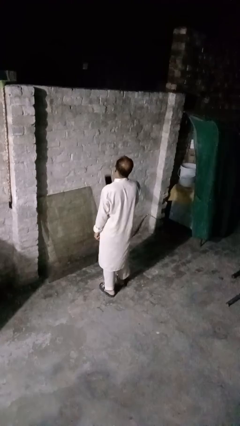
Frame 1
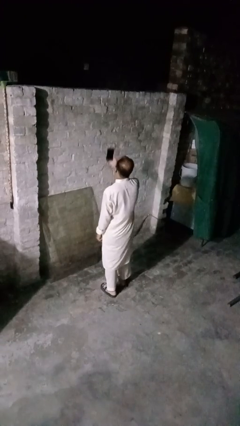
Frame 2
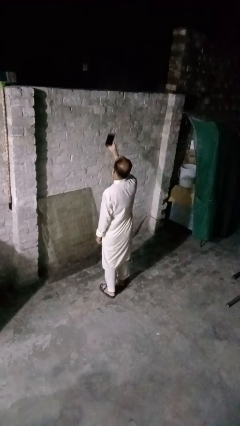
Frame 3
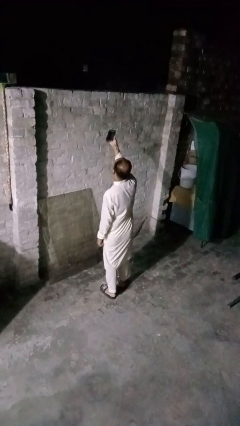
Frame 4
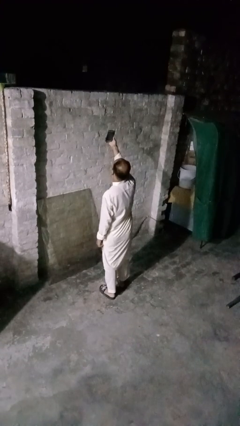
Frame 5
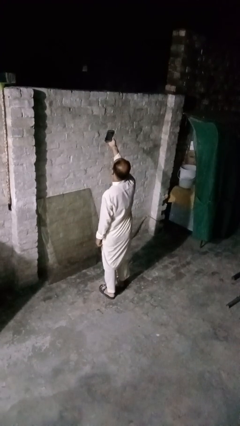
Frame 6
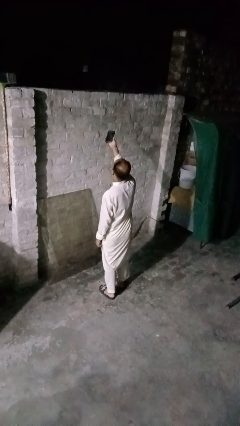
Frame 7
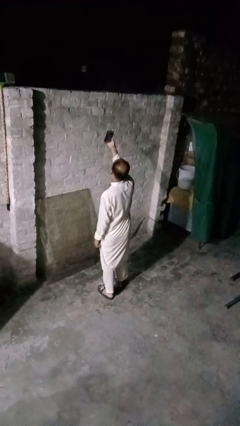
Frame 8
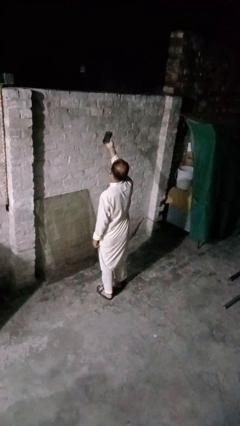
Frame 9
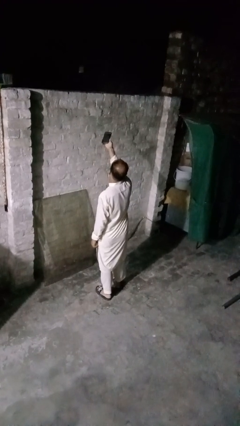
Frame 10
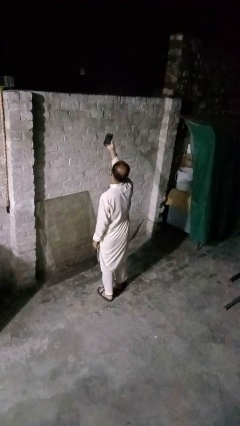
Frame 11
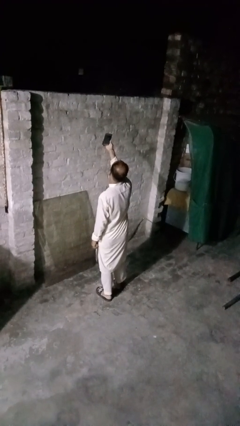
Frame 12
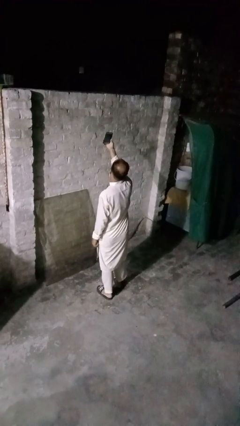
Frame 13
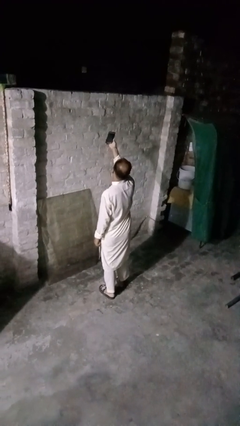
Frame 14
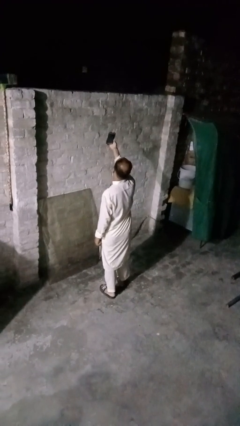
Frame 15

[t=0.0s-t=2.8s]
person takes selfie

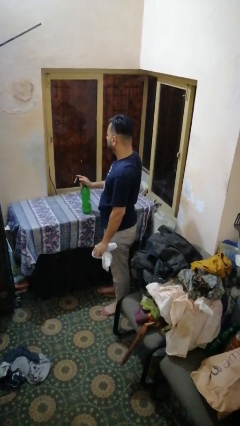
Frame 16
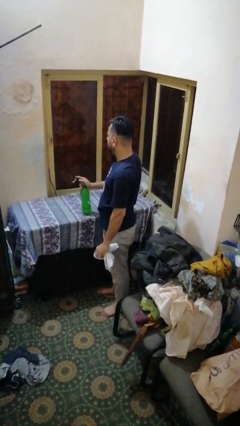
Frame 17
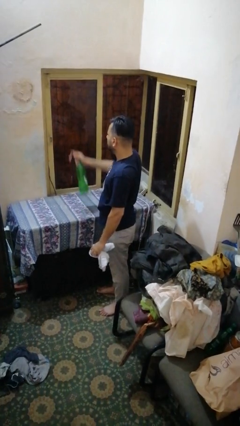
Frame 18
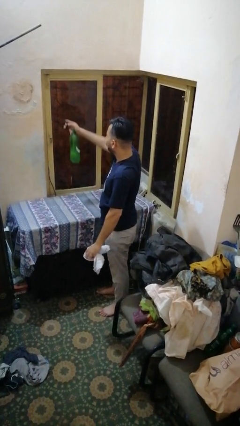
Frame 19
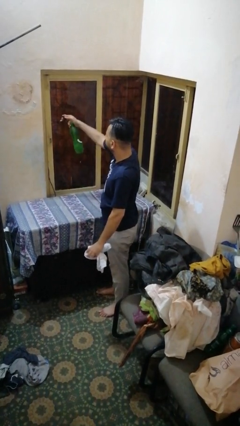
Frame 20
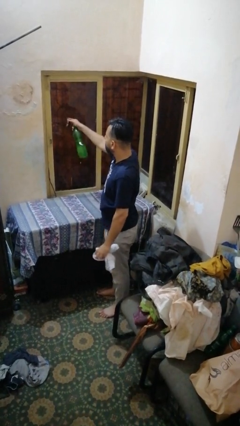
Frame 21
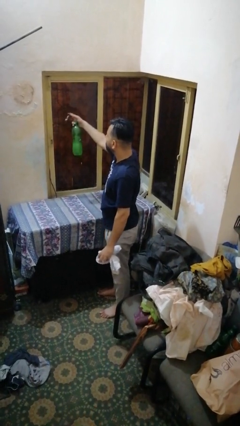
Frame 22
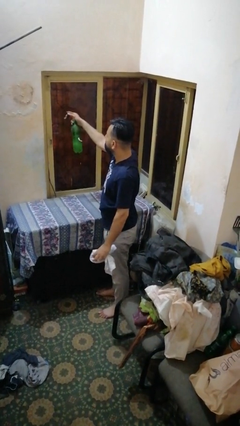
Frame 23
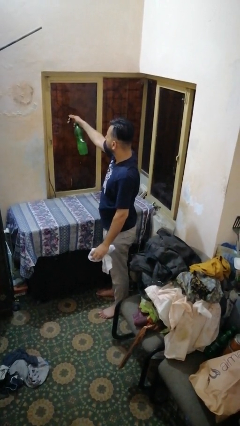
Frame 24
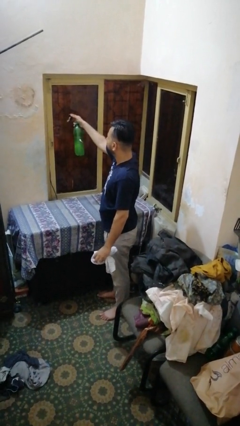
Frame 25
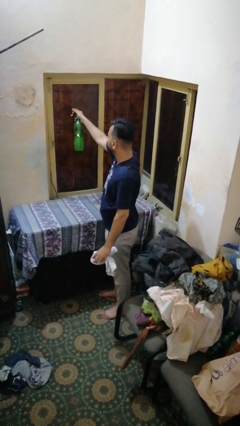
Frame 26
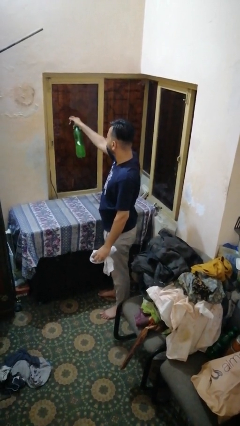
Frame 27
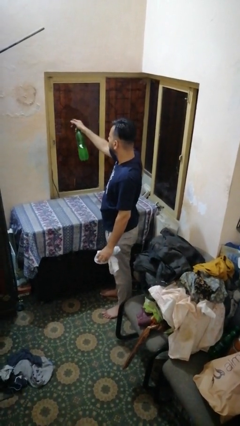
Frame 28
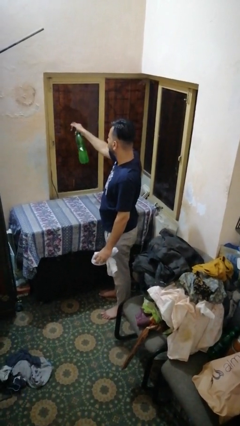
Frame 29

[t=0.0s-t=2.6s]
person sprays from bottle

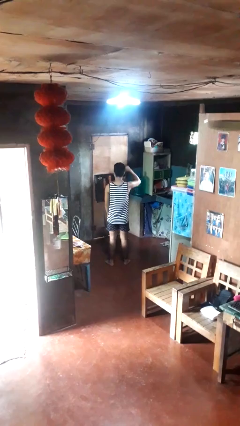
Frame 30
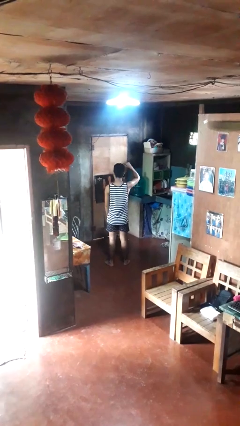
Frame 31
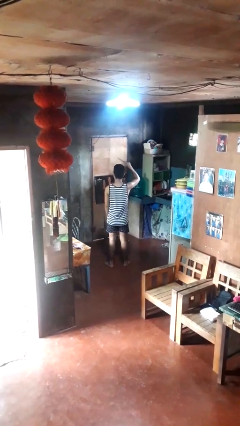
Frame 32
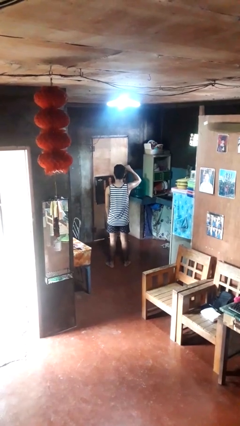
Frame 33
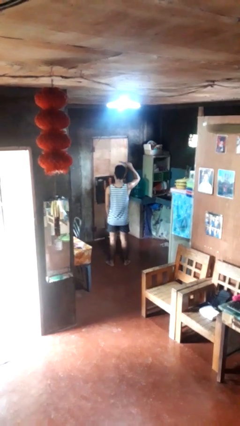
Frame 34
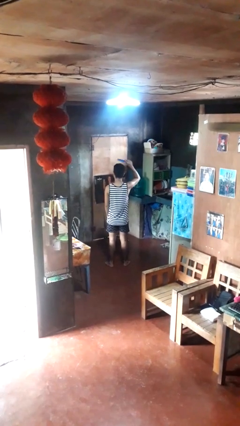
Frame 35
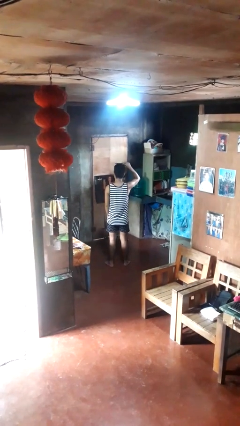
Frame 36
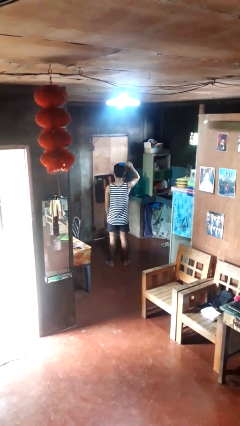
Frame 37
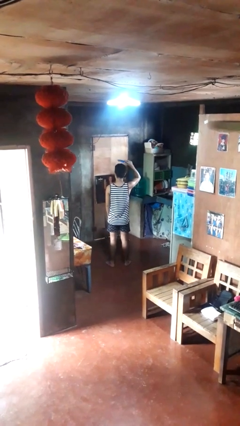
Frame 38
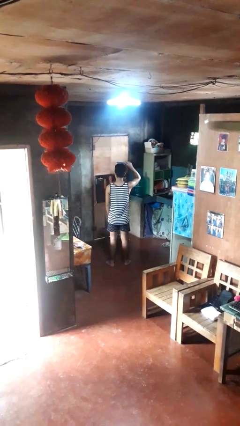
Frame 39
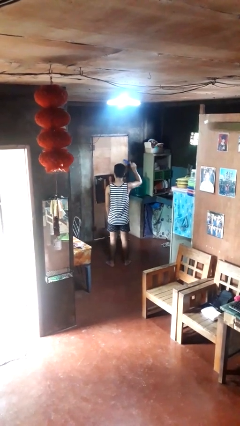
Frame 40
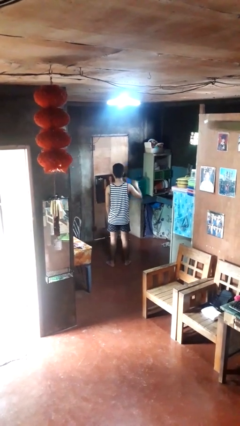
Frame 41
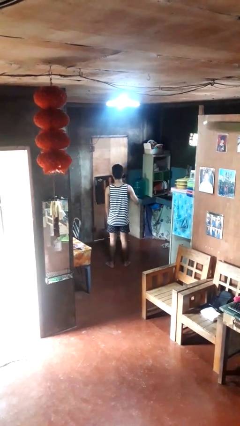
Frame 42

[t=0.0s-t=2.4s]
person brushes hair

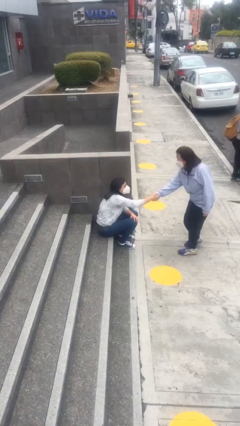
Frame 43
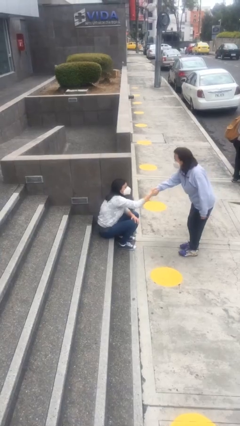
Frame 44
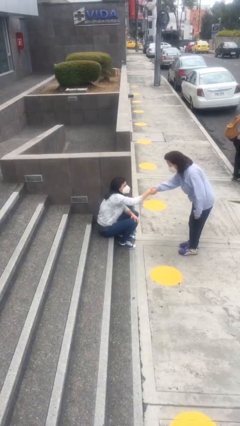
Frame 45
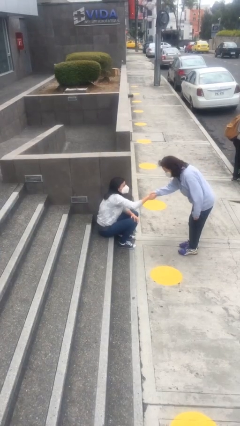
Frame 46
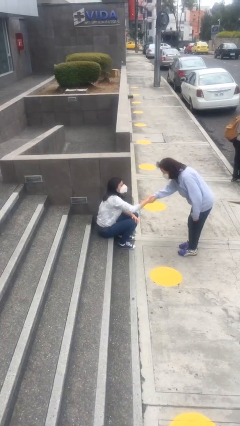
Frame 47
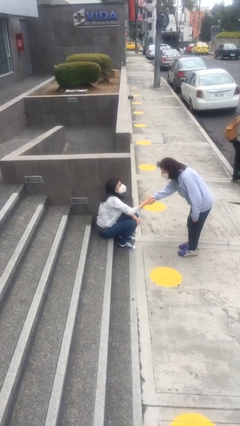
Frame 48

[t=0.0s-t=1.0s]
person shakes hand

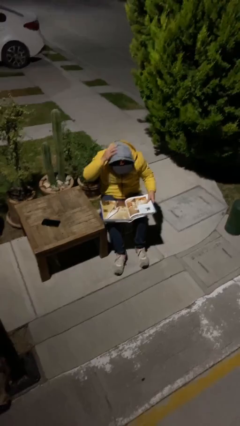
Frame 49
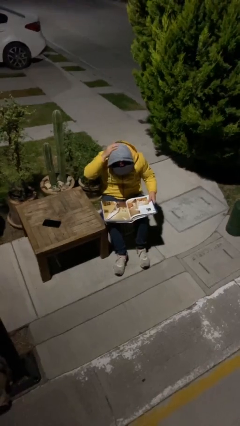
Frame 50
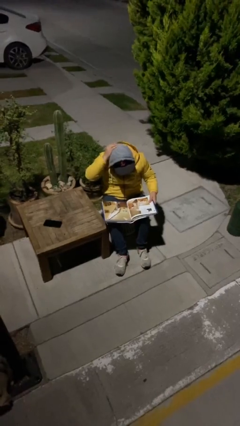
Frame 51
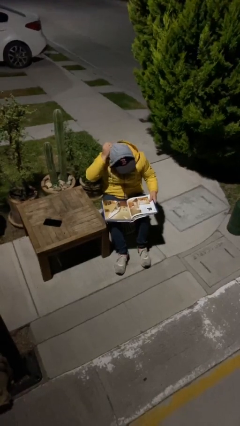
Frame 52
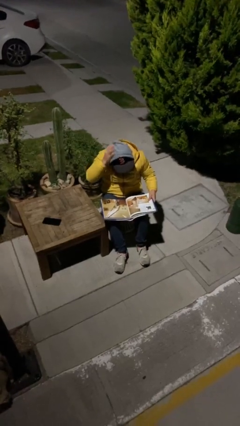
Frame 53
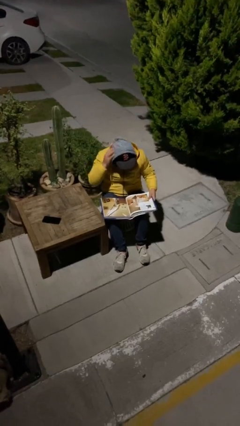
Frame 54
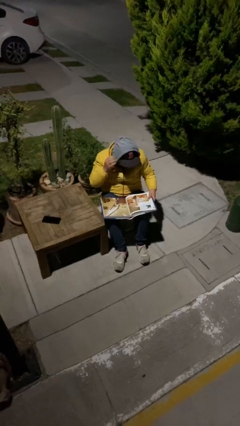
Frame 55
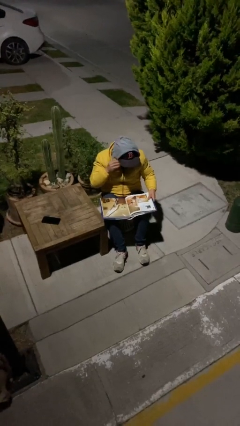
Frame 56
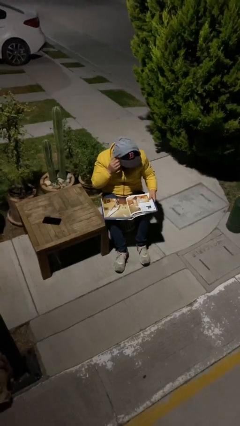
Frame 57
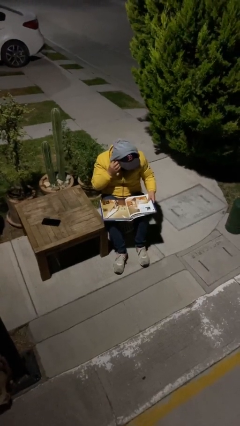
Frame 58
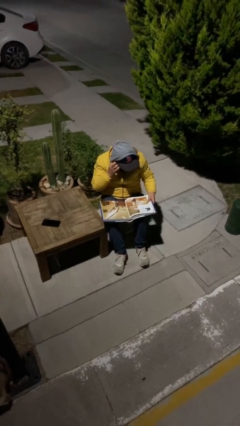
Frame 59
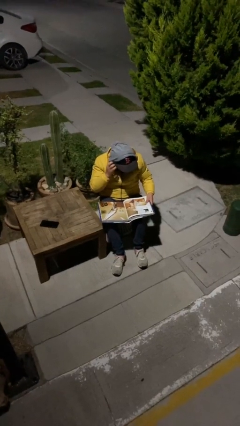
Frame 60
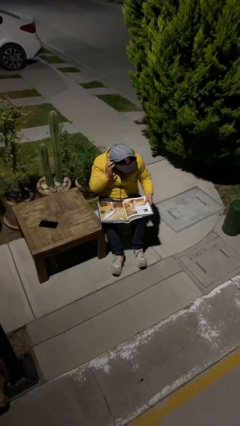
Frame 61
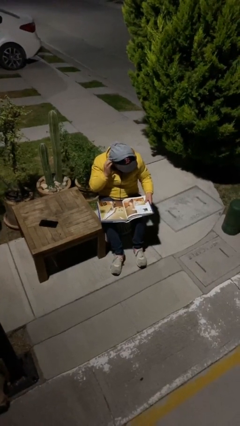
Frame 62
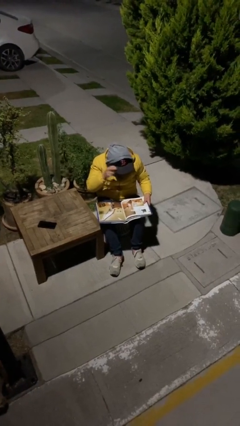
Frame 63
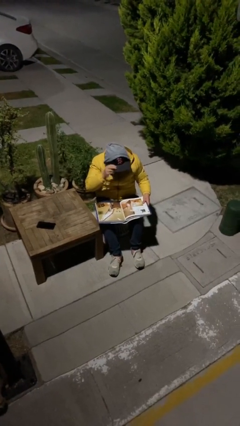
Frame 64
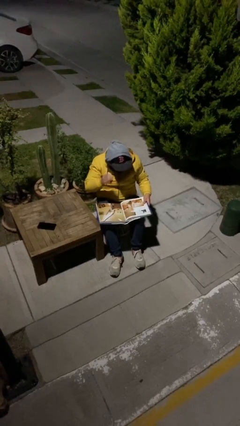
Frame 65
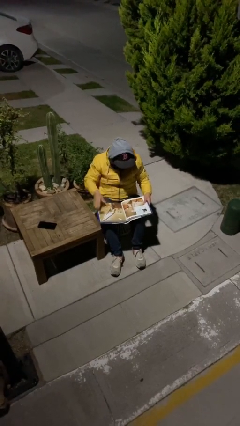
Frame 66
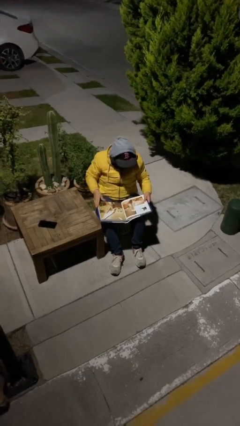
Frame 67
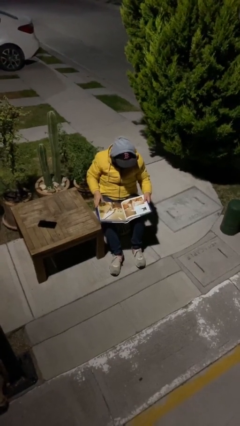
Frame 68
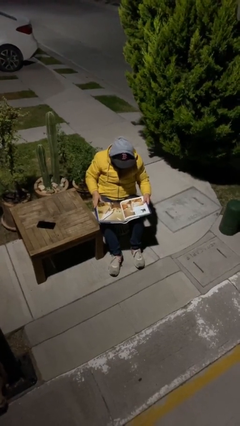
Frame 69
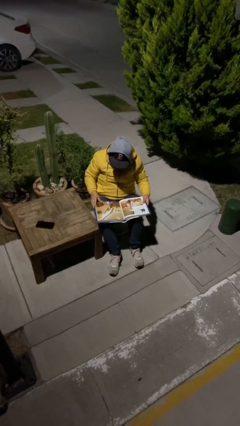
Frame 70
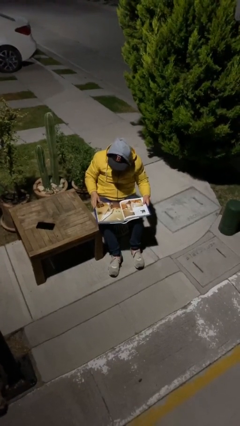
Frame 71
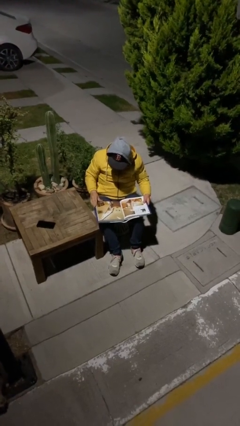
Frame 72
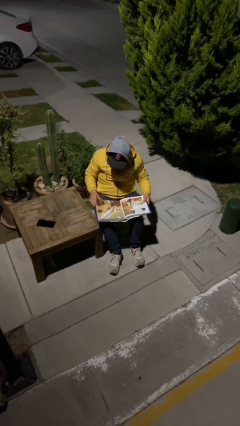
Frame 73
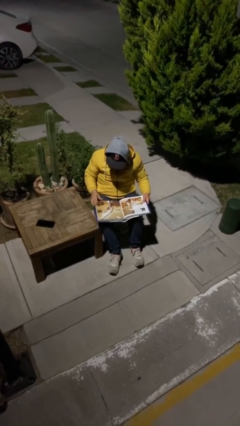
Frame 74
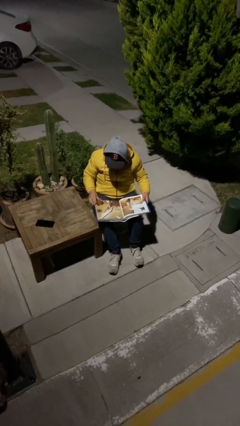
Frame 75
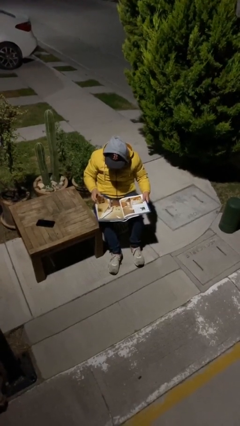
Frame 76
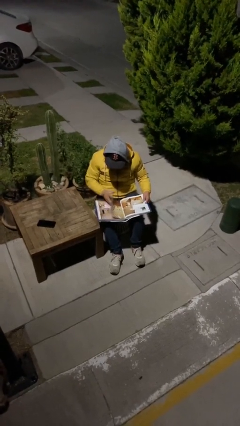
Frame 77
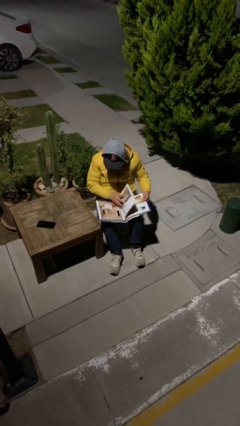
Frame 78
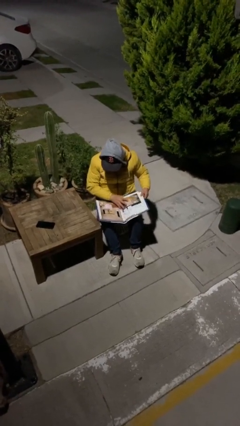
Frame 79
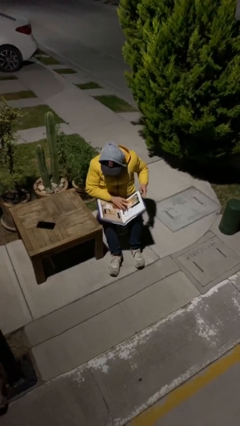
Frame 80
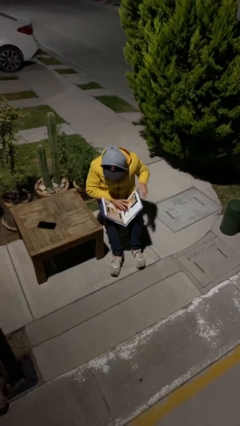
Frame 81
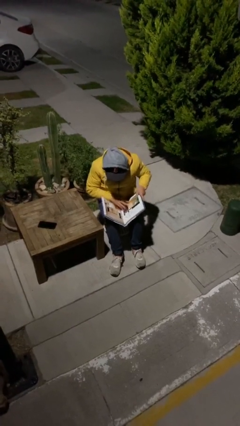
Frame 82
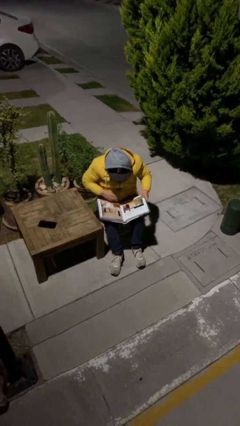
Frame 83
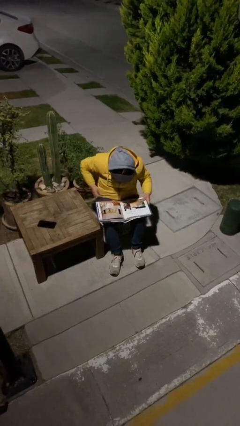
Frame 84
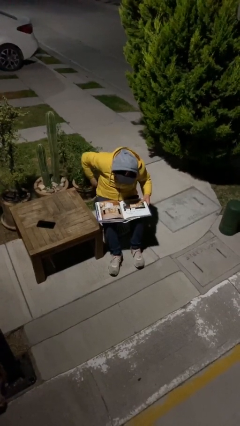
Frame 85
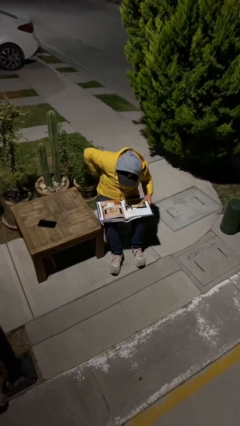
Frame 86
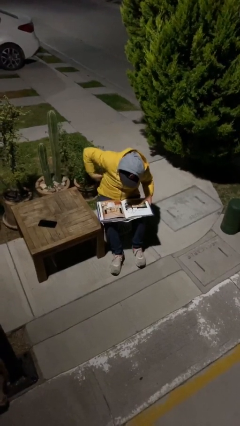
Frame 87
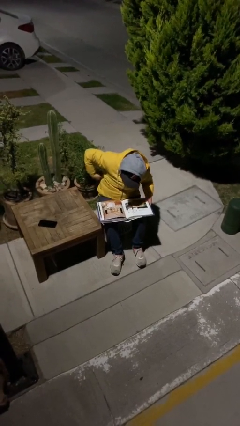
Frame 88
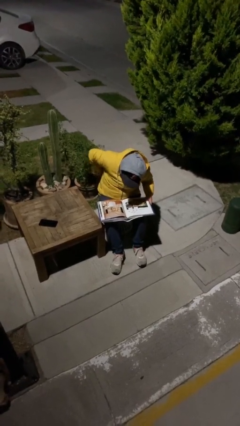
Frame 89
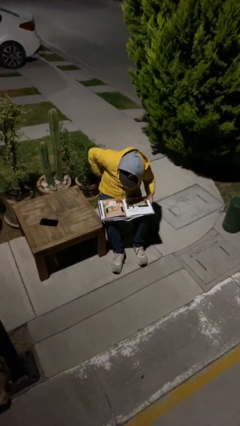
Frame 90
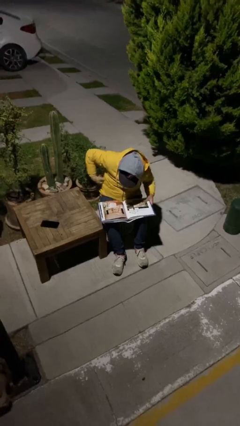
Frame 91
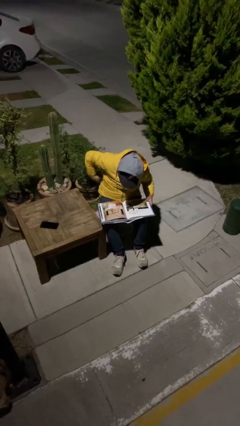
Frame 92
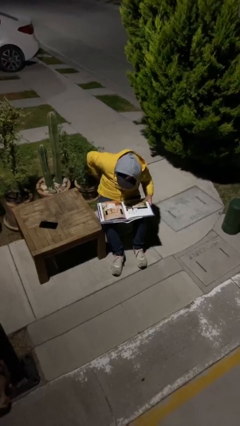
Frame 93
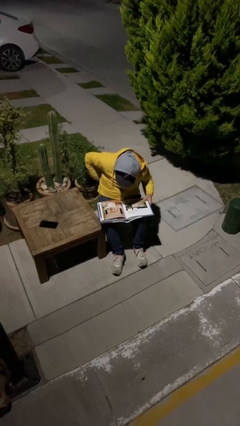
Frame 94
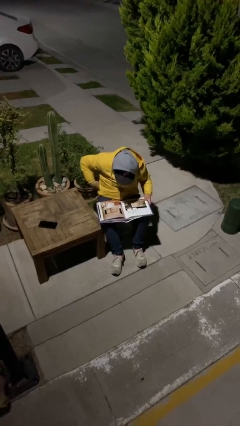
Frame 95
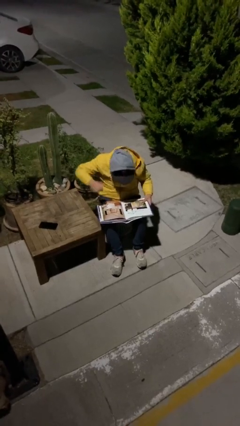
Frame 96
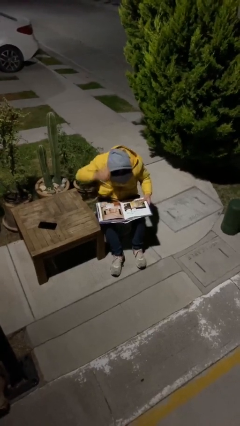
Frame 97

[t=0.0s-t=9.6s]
person reads document
